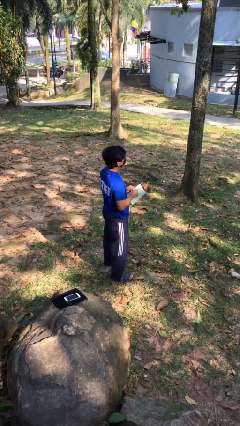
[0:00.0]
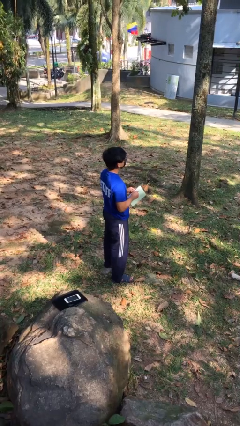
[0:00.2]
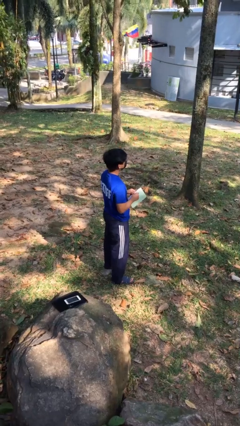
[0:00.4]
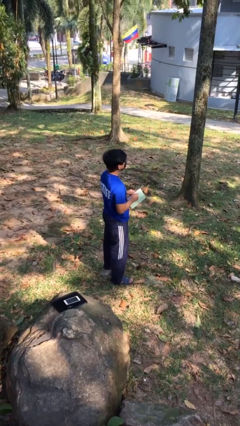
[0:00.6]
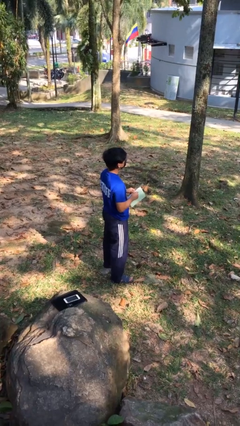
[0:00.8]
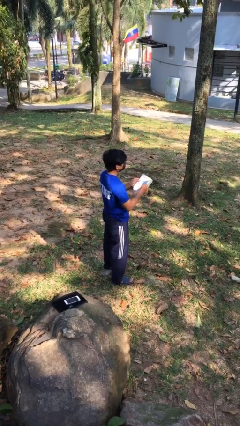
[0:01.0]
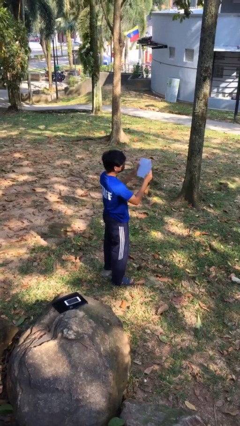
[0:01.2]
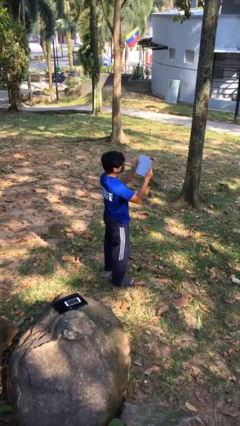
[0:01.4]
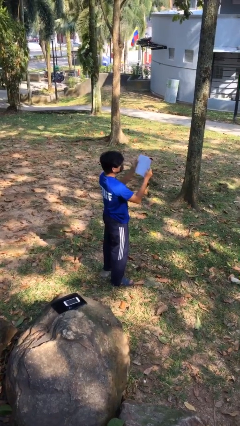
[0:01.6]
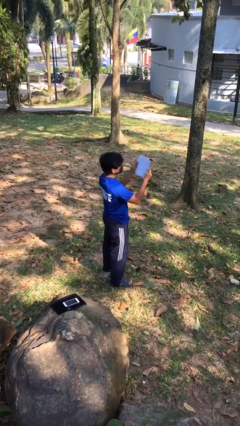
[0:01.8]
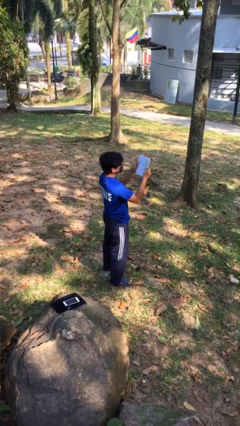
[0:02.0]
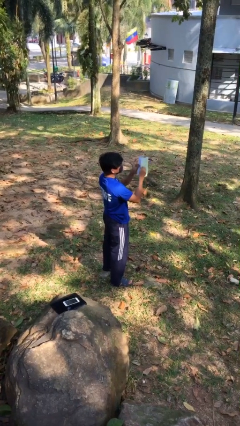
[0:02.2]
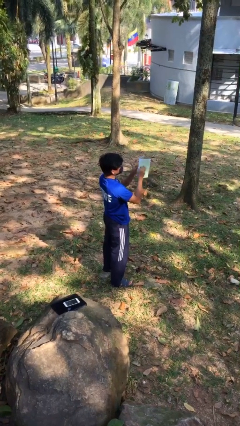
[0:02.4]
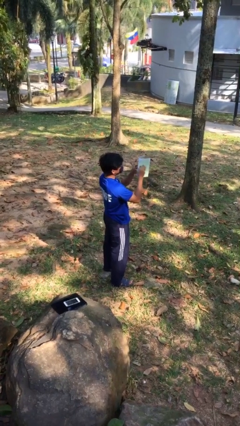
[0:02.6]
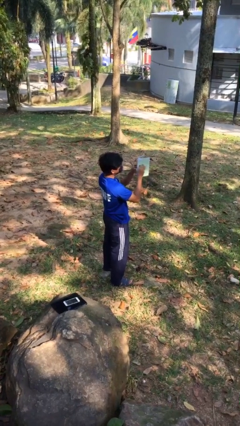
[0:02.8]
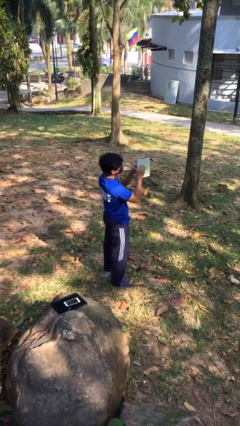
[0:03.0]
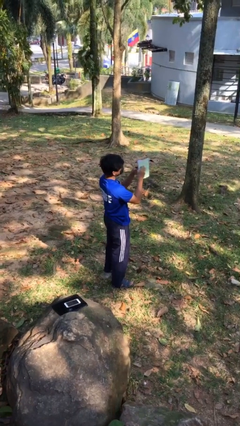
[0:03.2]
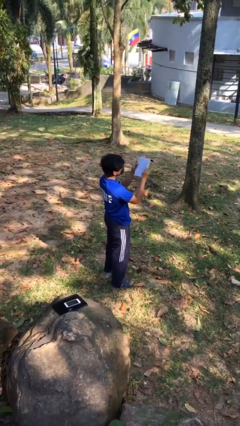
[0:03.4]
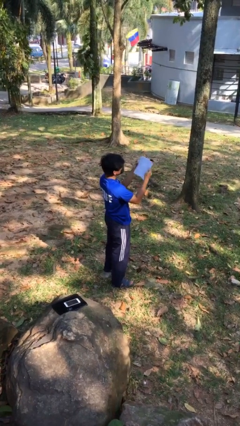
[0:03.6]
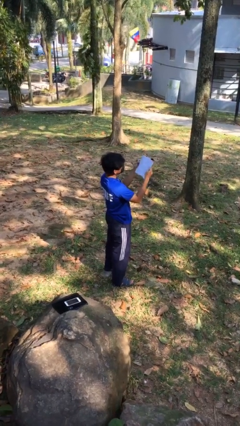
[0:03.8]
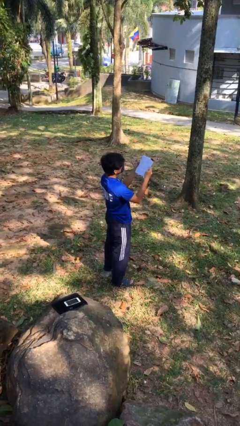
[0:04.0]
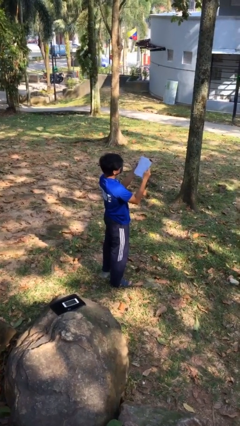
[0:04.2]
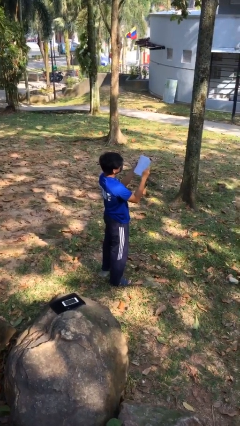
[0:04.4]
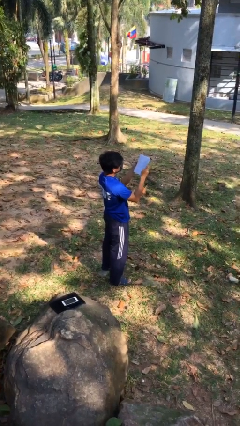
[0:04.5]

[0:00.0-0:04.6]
person reads document

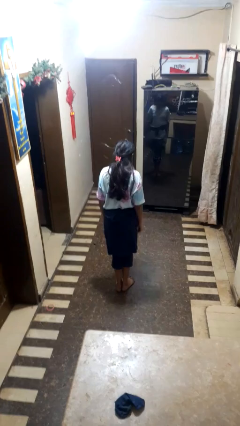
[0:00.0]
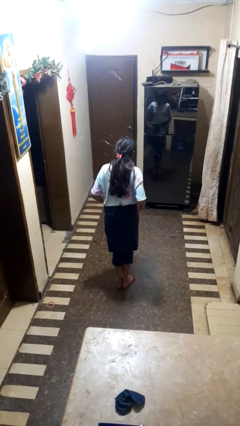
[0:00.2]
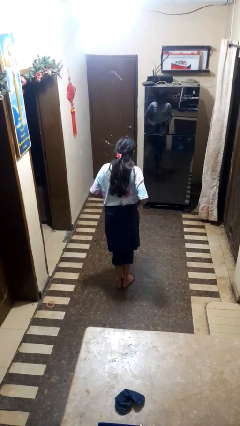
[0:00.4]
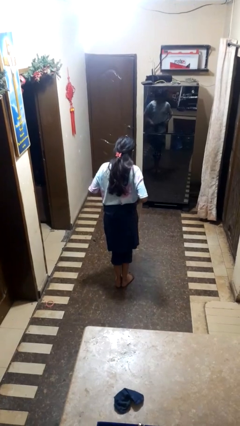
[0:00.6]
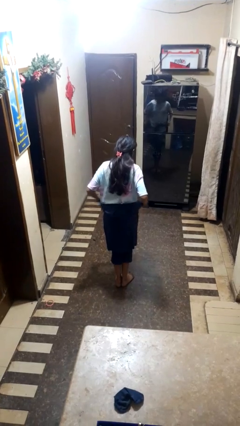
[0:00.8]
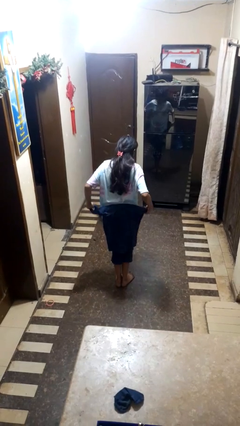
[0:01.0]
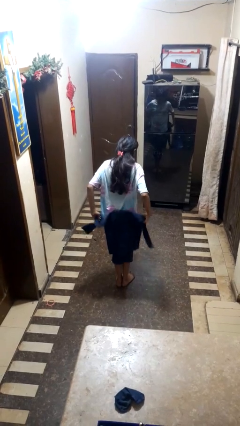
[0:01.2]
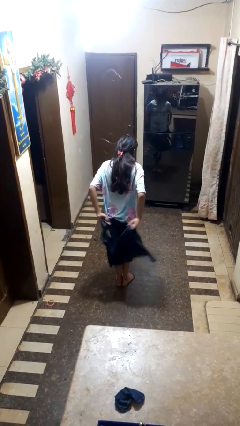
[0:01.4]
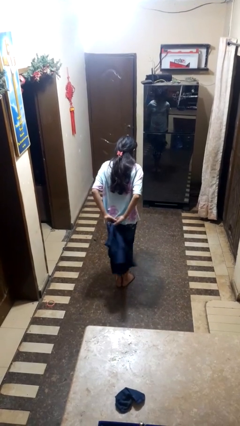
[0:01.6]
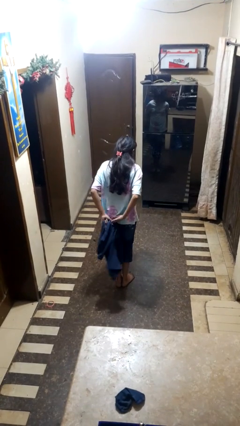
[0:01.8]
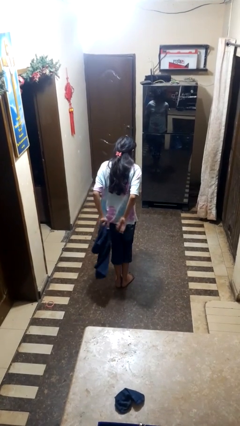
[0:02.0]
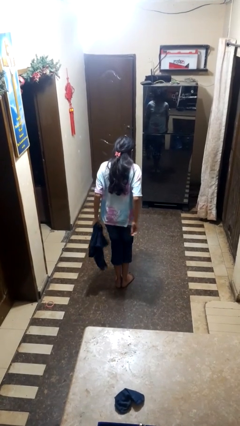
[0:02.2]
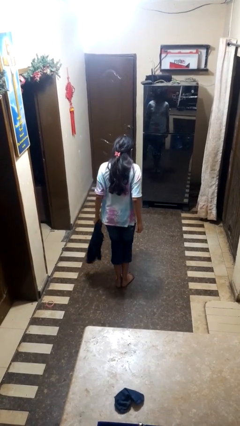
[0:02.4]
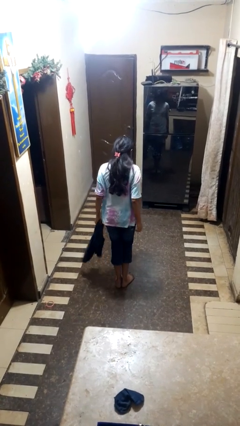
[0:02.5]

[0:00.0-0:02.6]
person unties jacket around waist
